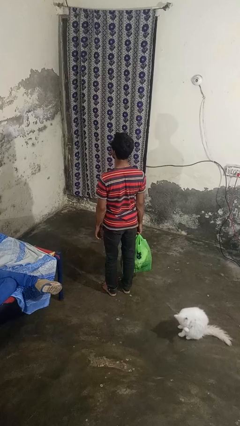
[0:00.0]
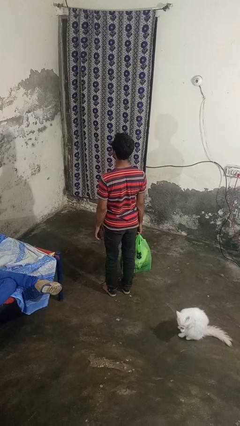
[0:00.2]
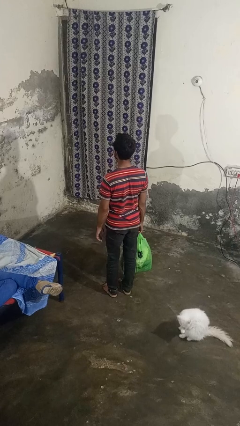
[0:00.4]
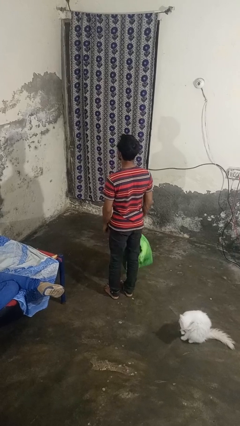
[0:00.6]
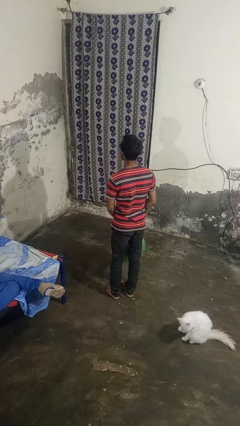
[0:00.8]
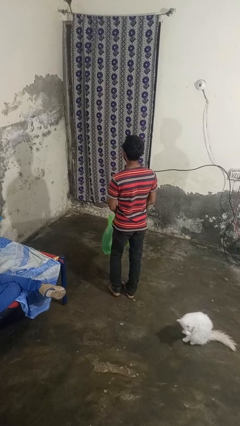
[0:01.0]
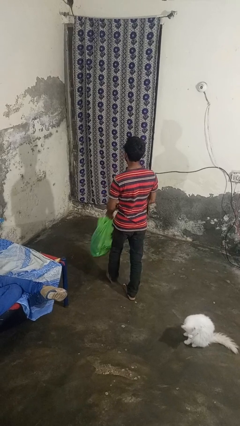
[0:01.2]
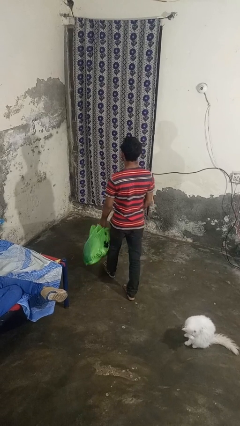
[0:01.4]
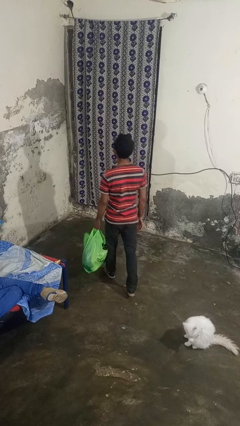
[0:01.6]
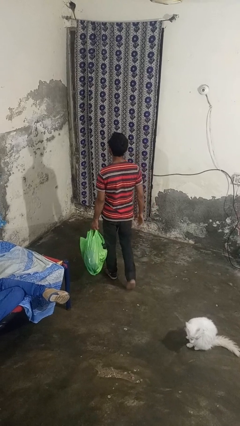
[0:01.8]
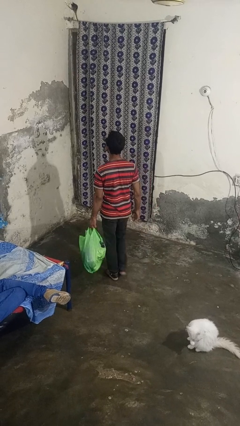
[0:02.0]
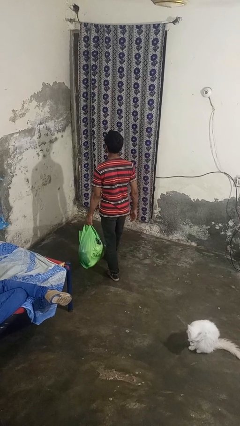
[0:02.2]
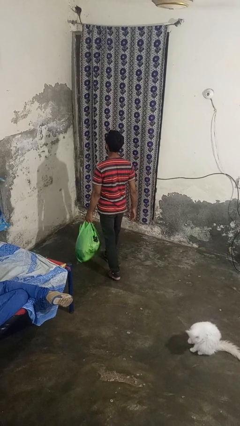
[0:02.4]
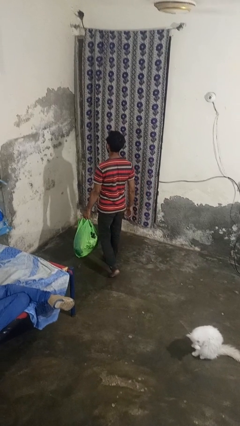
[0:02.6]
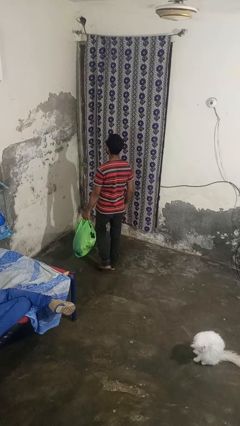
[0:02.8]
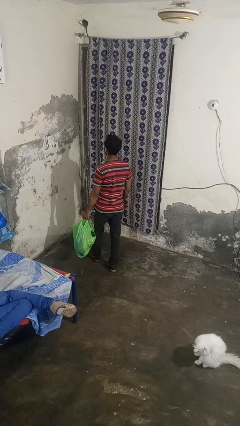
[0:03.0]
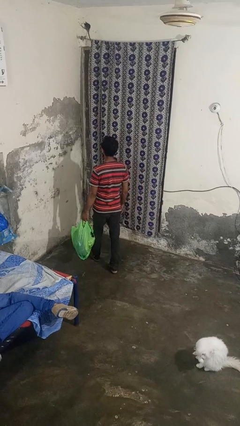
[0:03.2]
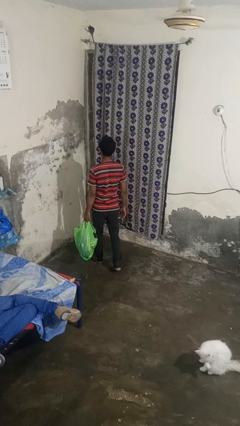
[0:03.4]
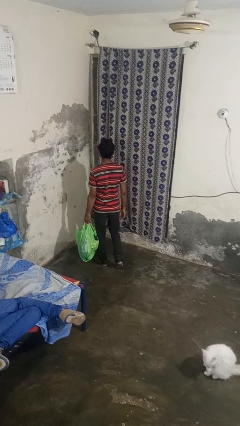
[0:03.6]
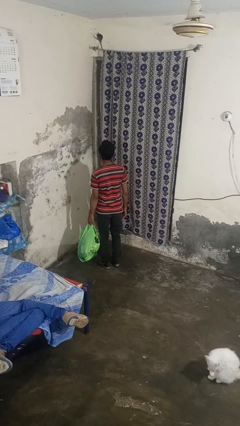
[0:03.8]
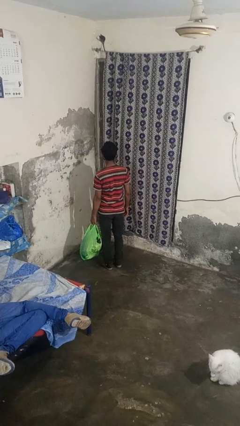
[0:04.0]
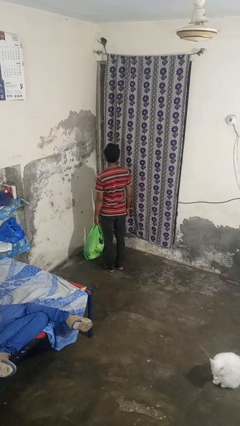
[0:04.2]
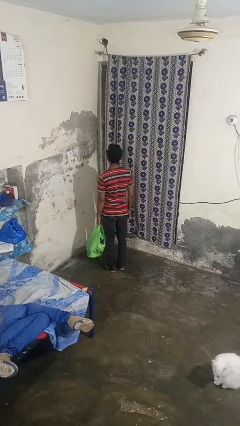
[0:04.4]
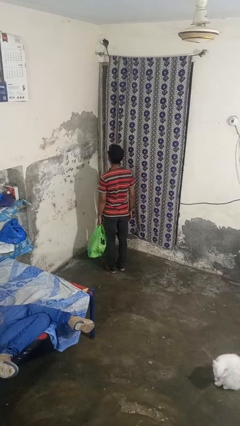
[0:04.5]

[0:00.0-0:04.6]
person carries groceries

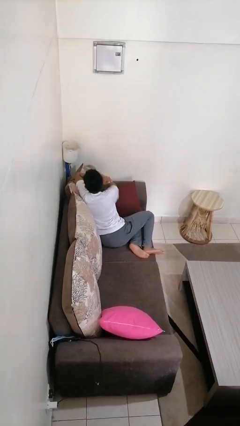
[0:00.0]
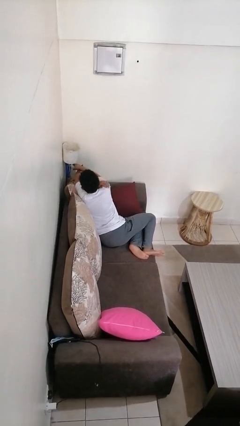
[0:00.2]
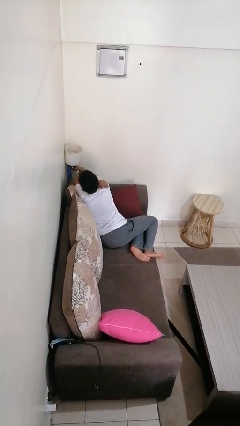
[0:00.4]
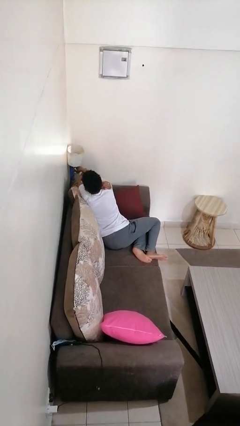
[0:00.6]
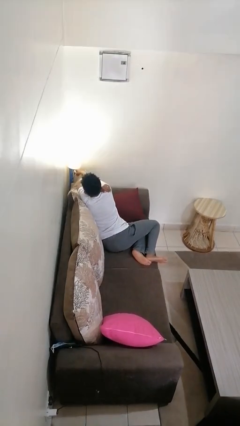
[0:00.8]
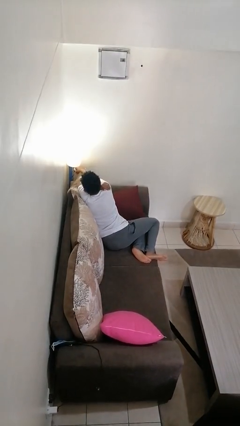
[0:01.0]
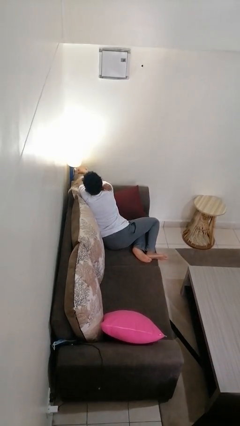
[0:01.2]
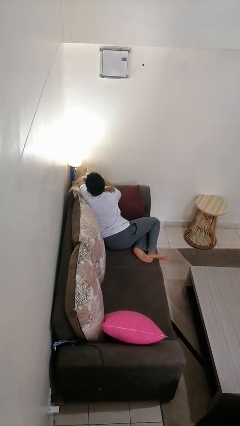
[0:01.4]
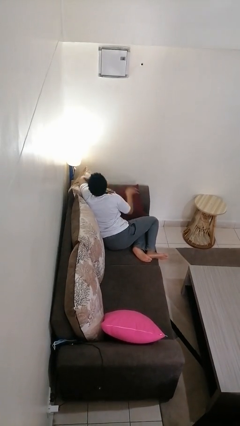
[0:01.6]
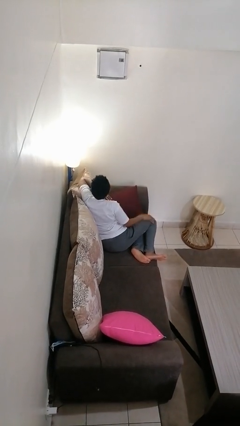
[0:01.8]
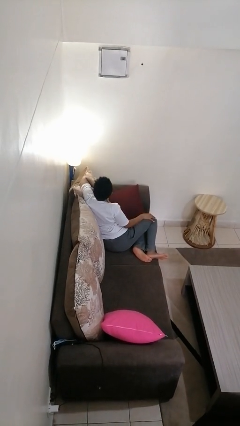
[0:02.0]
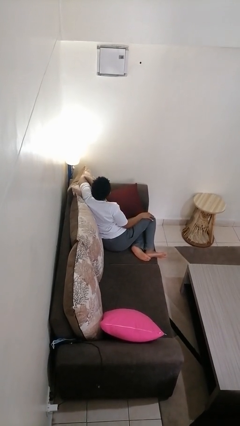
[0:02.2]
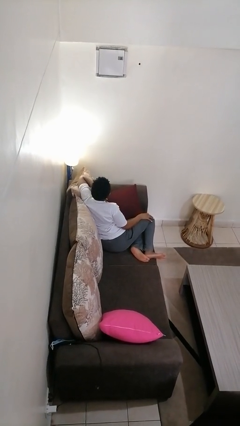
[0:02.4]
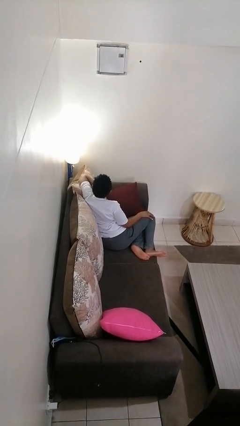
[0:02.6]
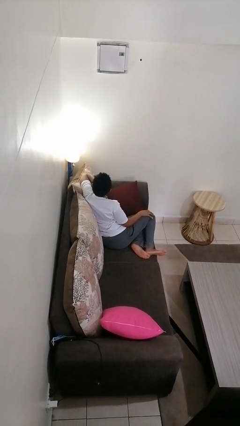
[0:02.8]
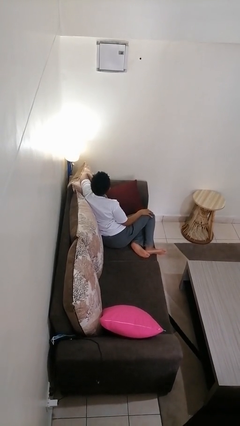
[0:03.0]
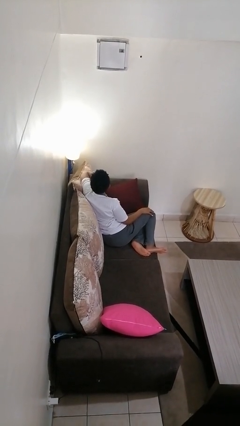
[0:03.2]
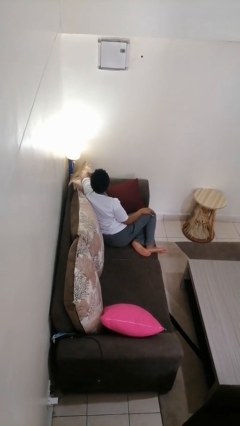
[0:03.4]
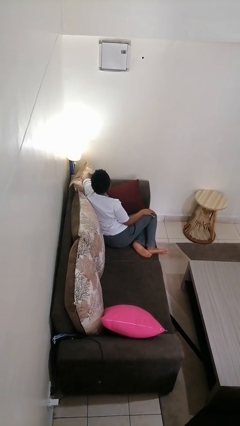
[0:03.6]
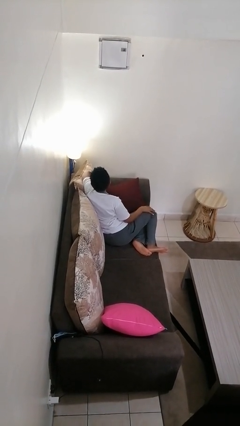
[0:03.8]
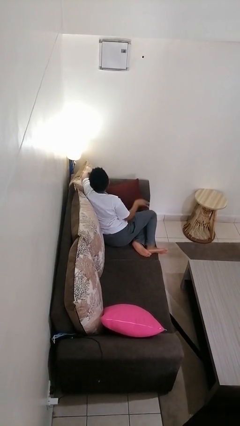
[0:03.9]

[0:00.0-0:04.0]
person turns on lamp

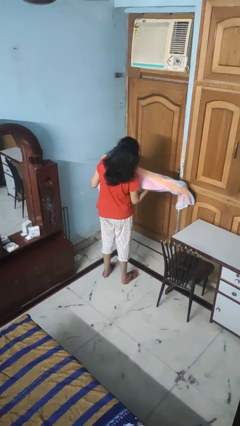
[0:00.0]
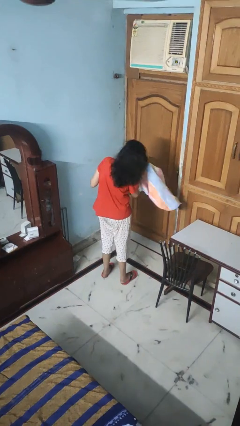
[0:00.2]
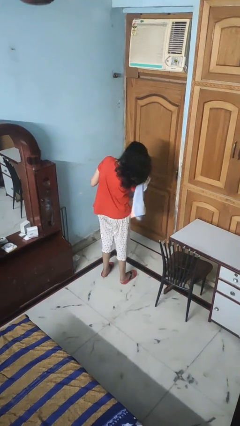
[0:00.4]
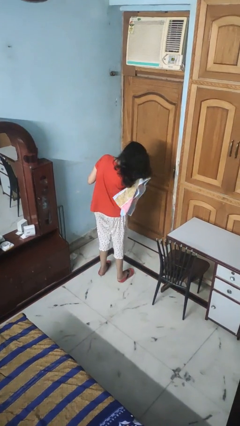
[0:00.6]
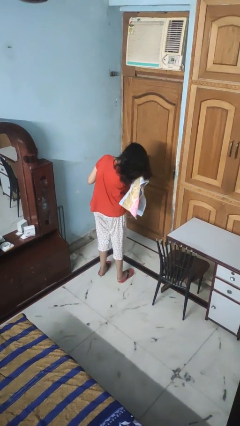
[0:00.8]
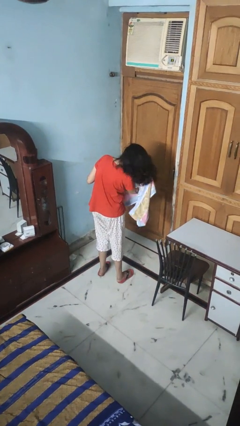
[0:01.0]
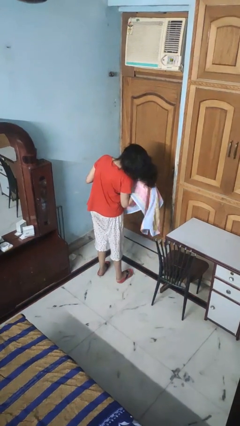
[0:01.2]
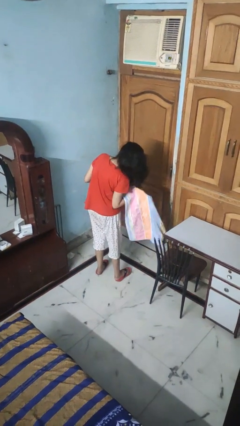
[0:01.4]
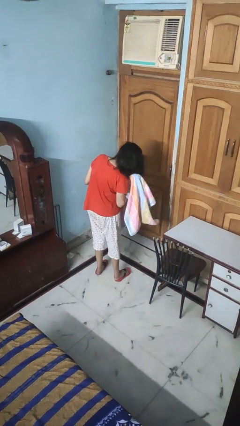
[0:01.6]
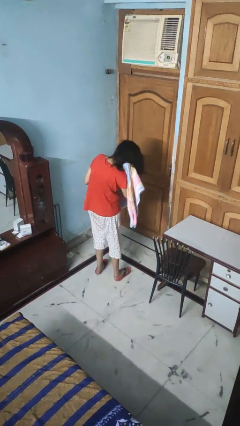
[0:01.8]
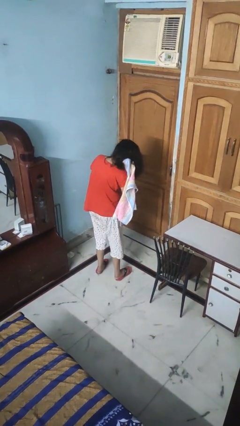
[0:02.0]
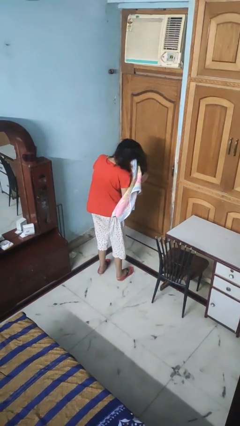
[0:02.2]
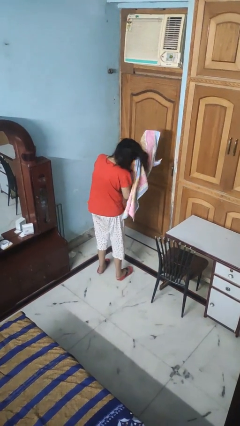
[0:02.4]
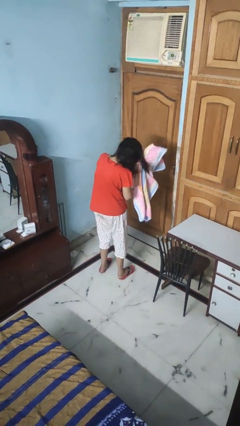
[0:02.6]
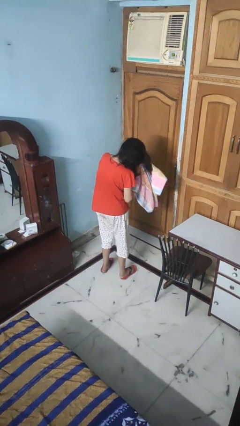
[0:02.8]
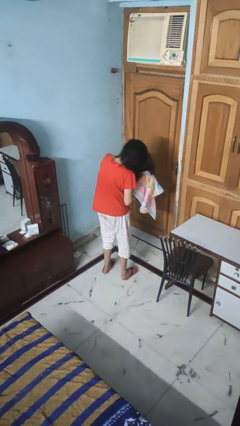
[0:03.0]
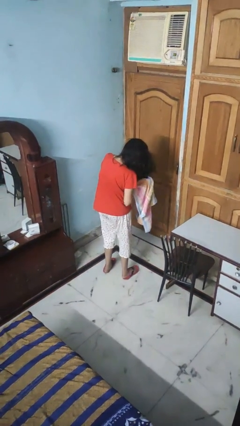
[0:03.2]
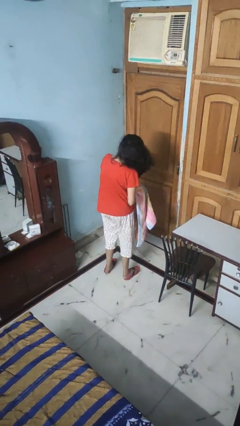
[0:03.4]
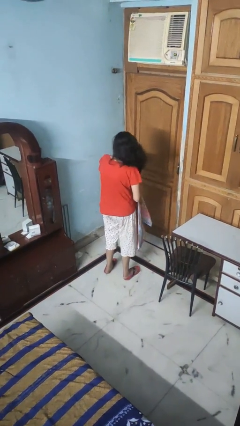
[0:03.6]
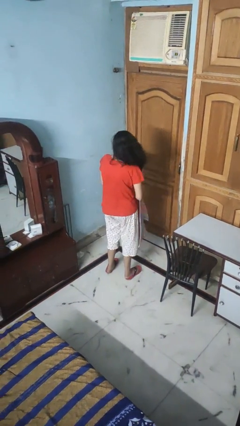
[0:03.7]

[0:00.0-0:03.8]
person dries hair with towel

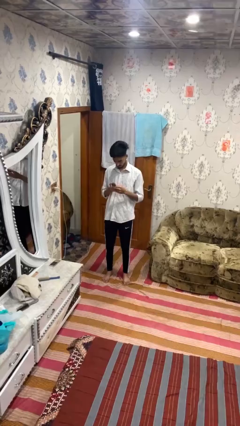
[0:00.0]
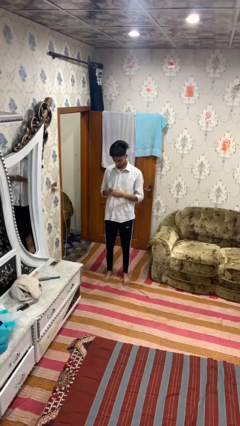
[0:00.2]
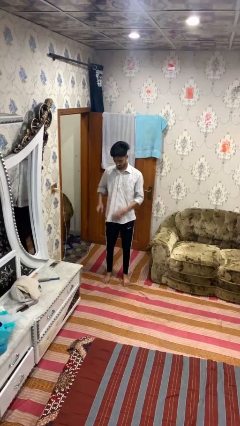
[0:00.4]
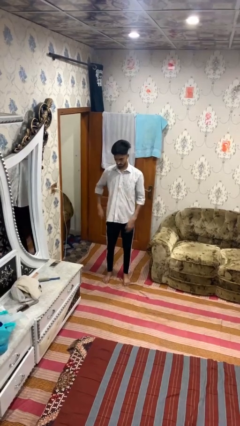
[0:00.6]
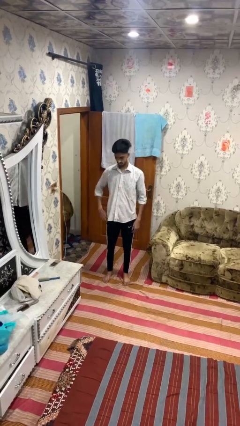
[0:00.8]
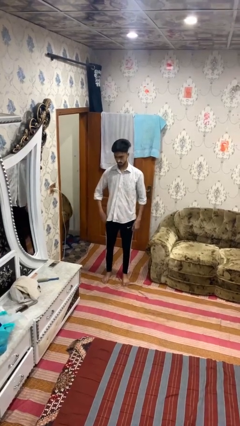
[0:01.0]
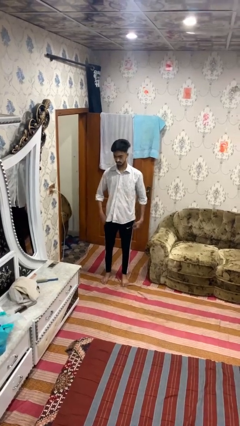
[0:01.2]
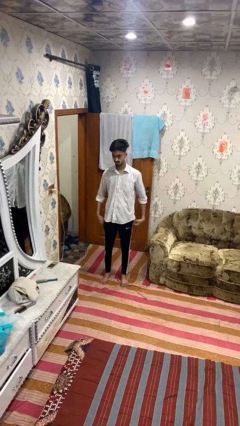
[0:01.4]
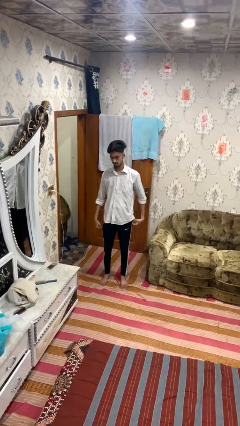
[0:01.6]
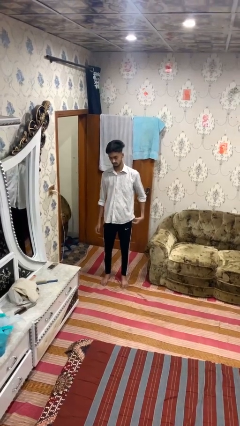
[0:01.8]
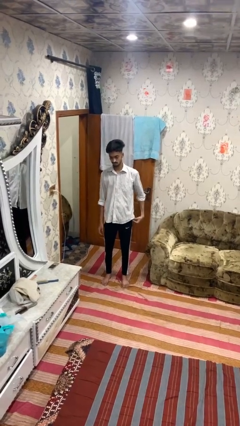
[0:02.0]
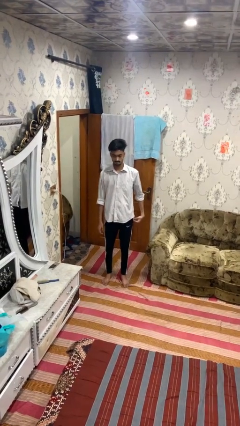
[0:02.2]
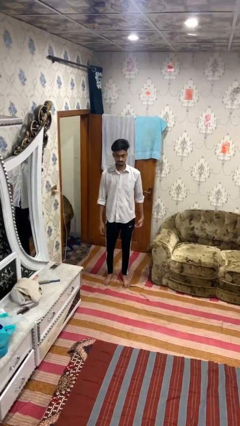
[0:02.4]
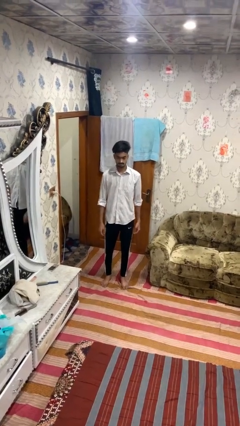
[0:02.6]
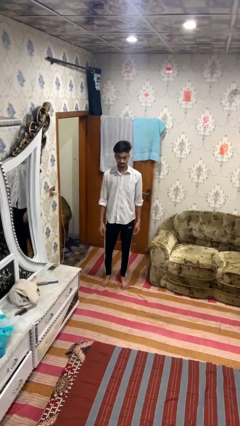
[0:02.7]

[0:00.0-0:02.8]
person puts phone into pocket

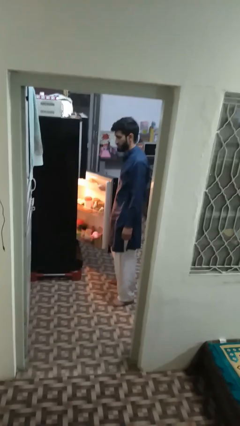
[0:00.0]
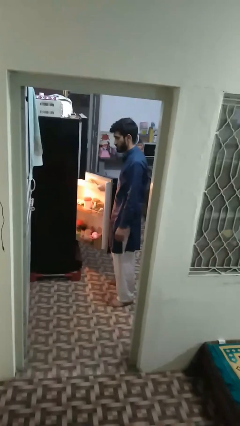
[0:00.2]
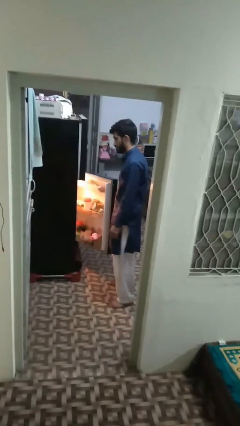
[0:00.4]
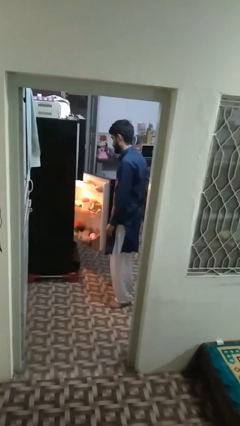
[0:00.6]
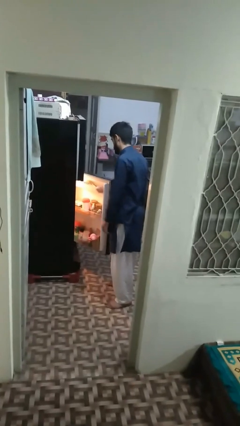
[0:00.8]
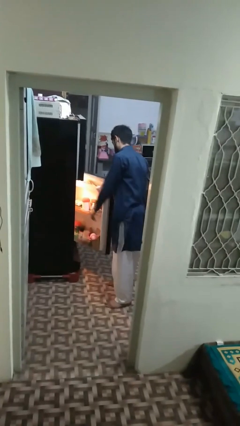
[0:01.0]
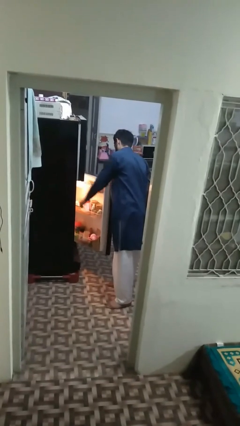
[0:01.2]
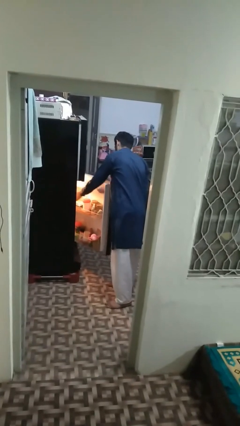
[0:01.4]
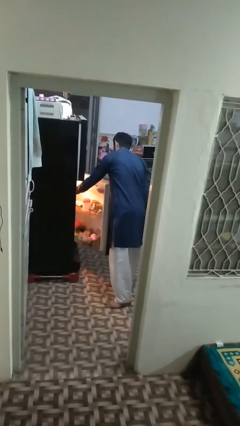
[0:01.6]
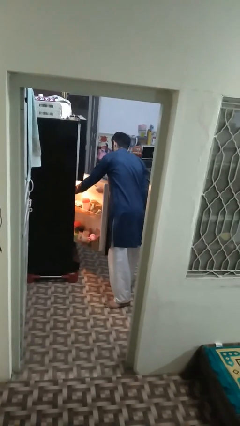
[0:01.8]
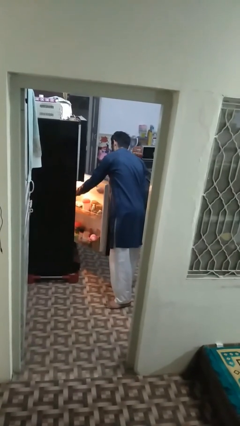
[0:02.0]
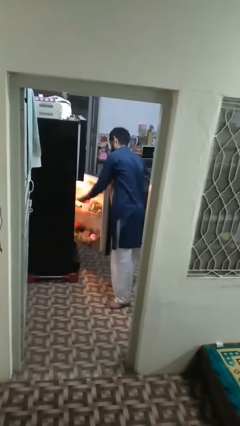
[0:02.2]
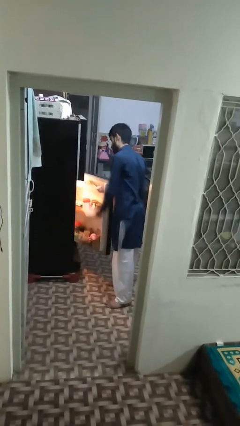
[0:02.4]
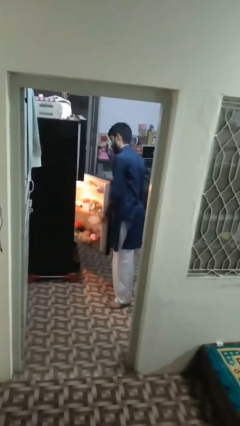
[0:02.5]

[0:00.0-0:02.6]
person takes object from refrigerator
